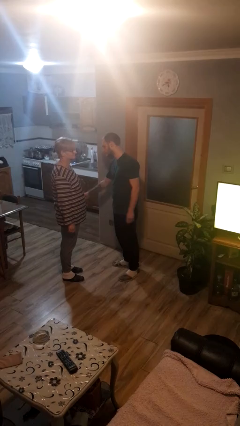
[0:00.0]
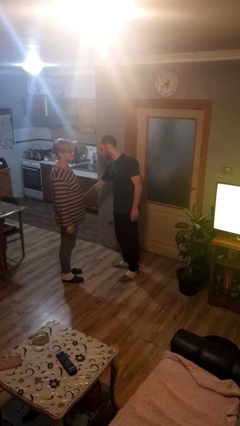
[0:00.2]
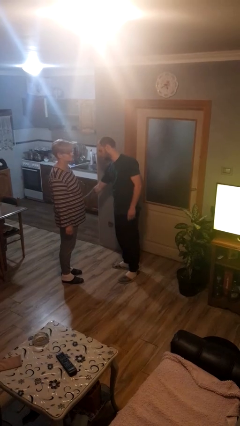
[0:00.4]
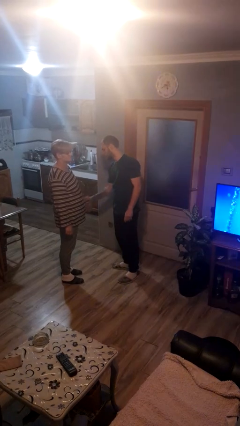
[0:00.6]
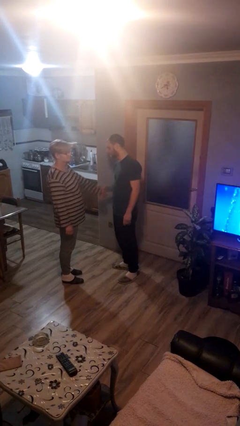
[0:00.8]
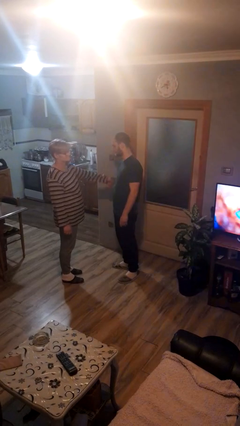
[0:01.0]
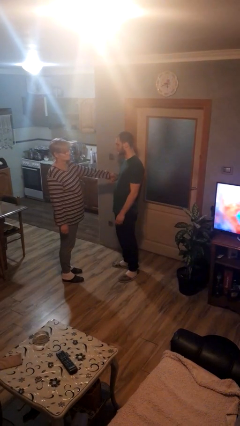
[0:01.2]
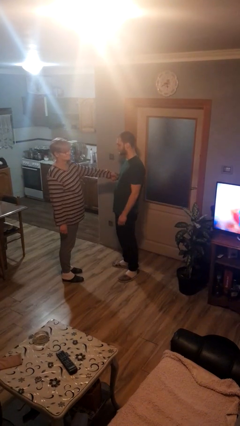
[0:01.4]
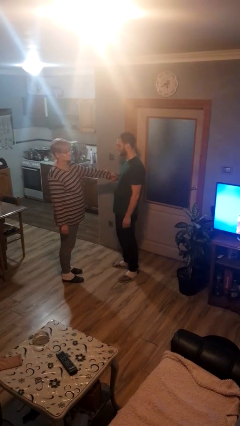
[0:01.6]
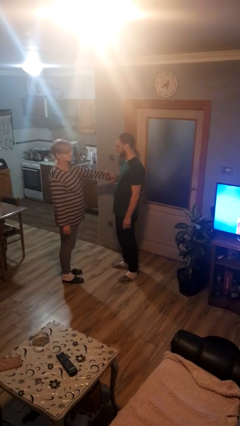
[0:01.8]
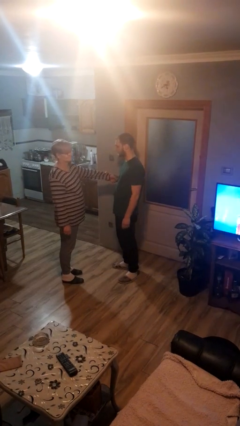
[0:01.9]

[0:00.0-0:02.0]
person grabs person by forearm

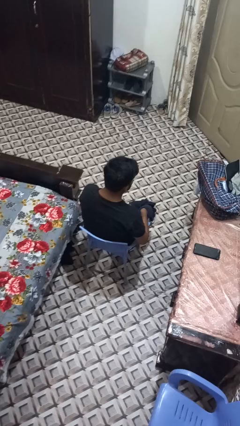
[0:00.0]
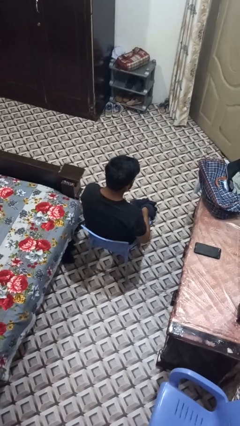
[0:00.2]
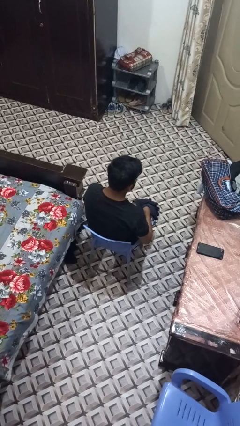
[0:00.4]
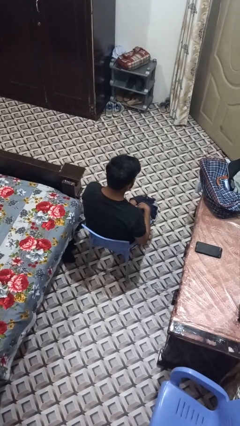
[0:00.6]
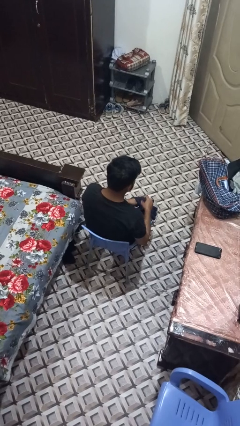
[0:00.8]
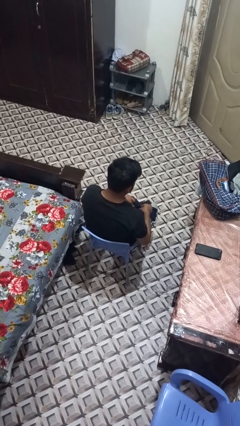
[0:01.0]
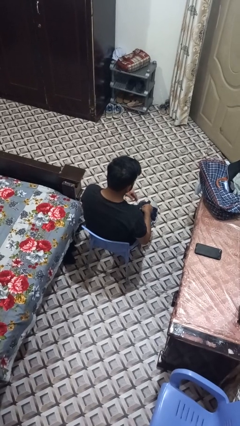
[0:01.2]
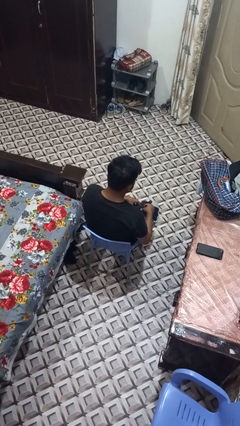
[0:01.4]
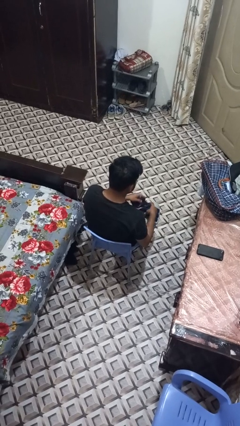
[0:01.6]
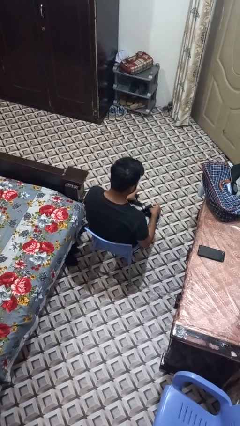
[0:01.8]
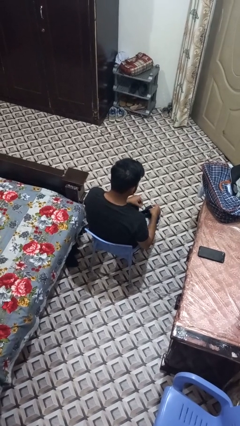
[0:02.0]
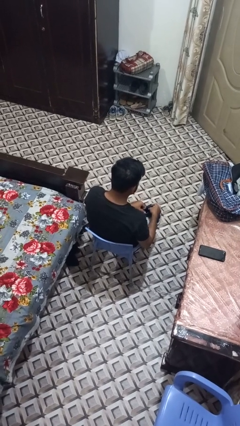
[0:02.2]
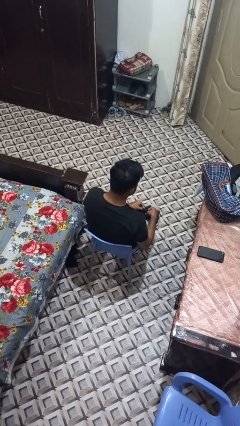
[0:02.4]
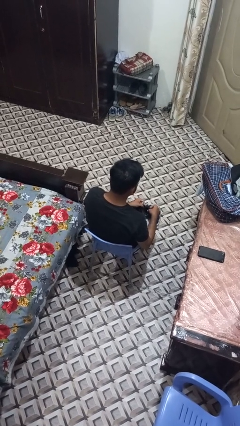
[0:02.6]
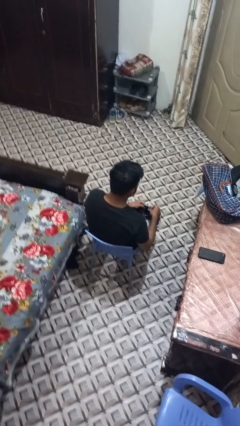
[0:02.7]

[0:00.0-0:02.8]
person takes off gloves

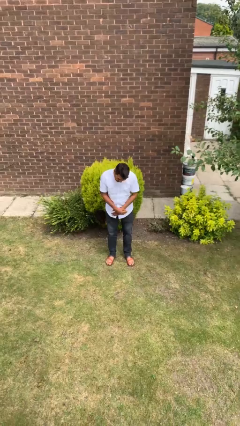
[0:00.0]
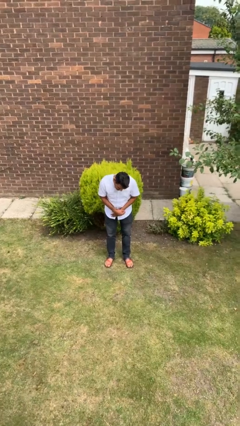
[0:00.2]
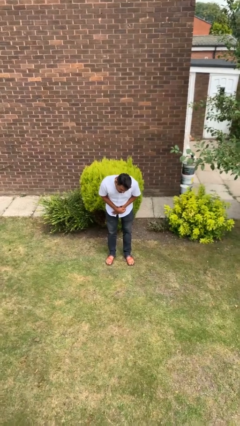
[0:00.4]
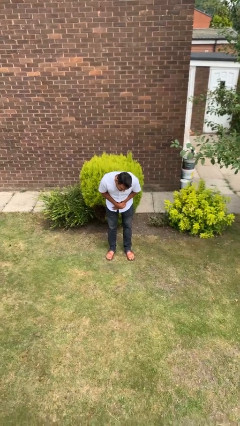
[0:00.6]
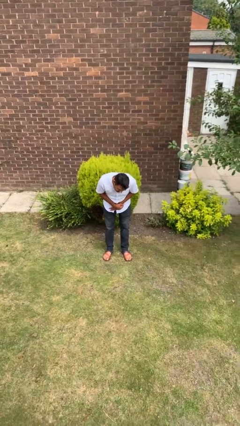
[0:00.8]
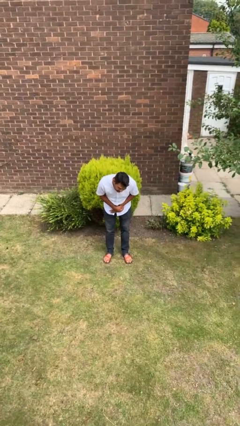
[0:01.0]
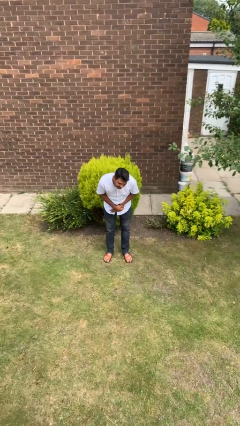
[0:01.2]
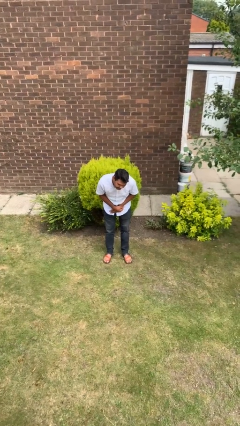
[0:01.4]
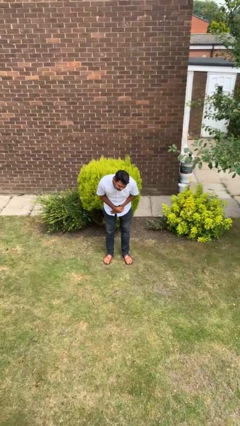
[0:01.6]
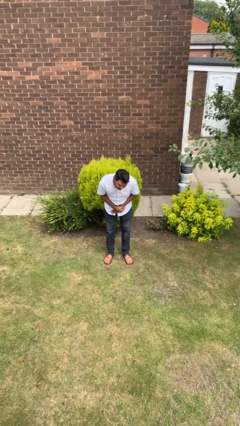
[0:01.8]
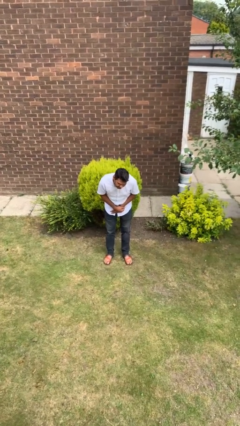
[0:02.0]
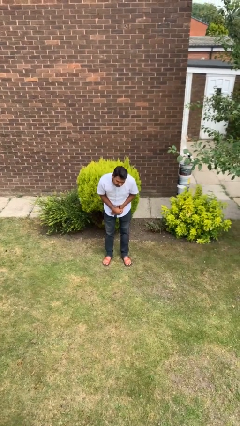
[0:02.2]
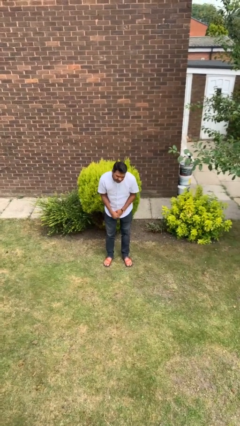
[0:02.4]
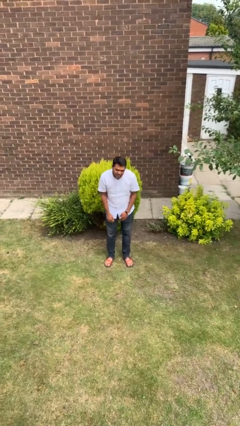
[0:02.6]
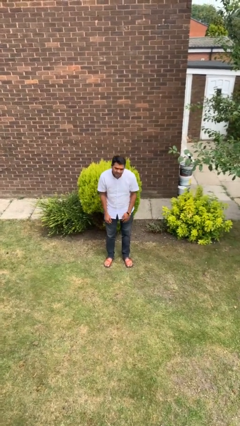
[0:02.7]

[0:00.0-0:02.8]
person bows

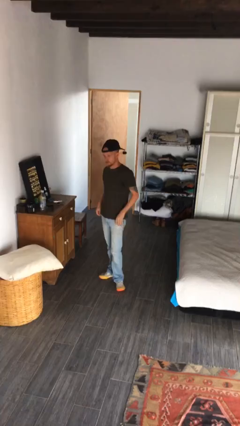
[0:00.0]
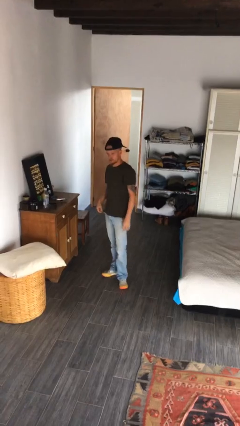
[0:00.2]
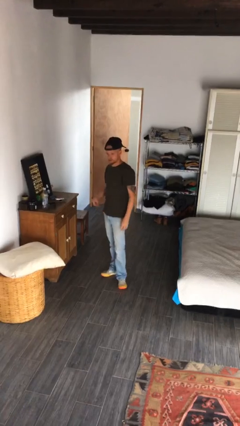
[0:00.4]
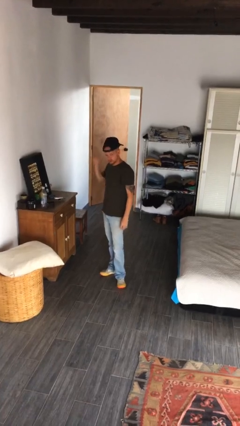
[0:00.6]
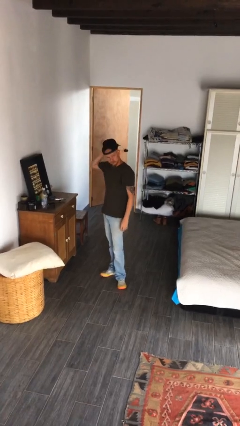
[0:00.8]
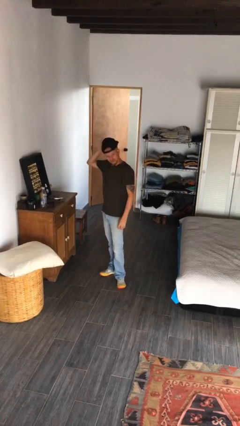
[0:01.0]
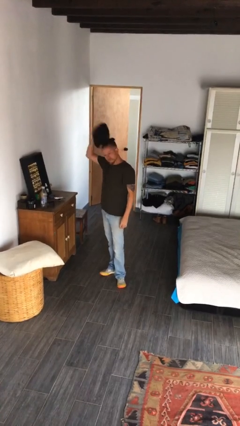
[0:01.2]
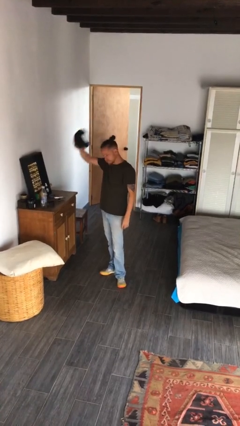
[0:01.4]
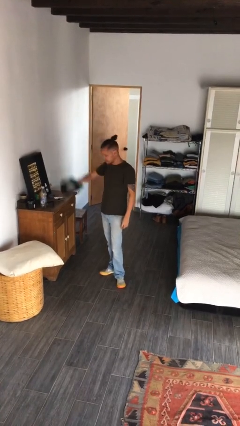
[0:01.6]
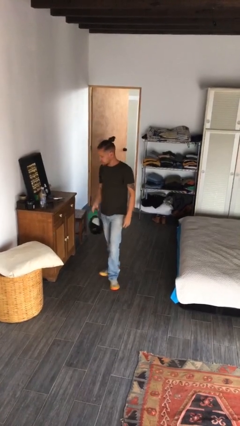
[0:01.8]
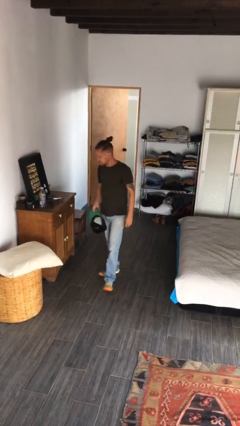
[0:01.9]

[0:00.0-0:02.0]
person takes off hat

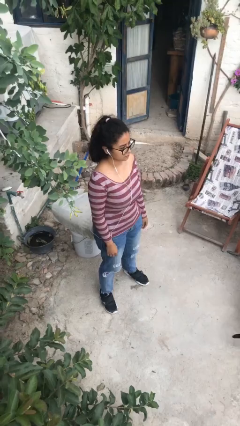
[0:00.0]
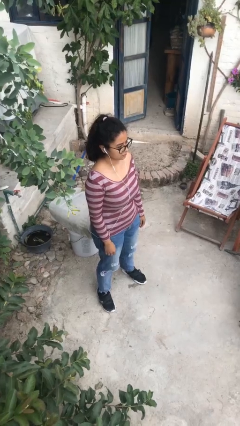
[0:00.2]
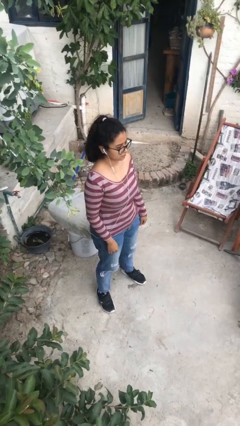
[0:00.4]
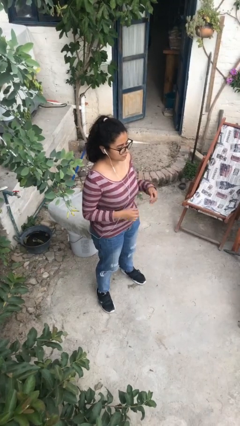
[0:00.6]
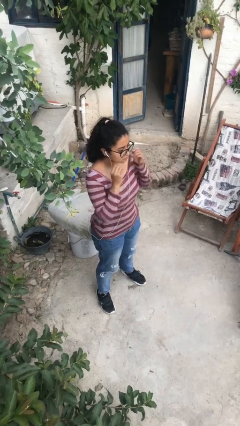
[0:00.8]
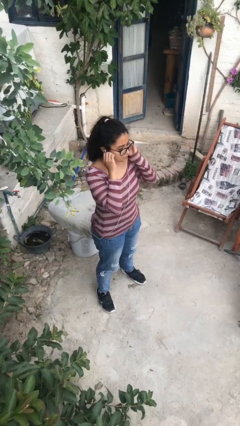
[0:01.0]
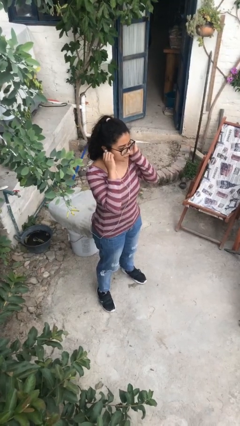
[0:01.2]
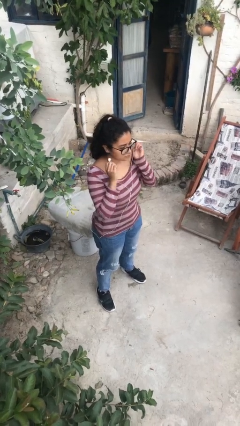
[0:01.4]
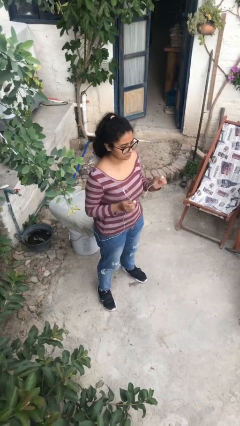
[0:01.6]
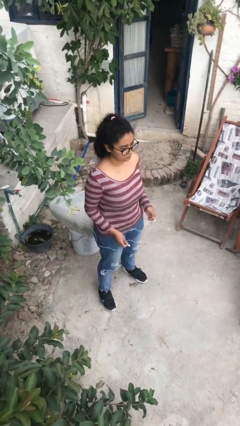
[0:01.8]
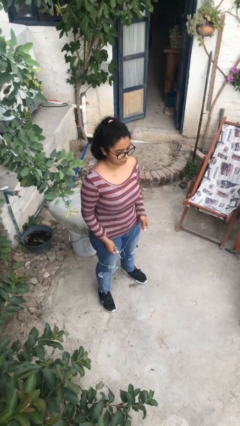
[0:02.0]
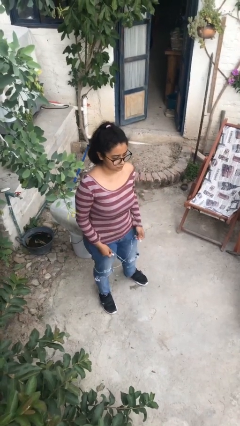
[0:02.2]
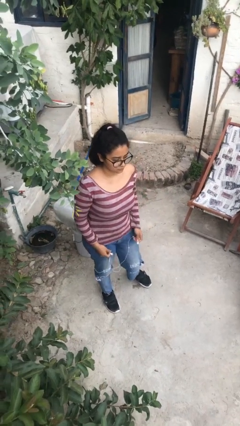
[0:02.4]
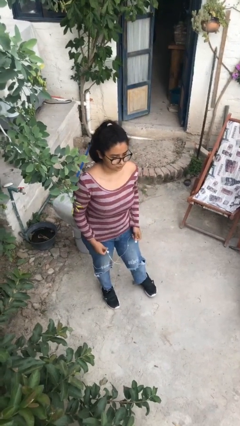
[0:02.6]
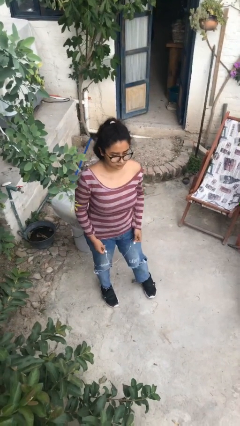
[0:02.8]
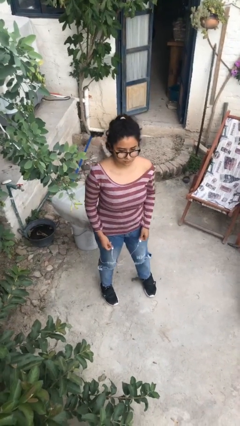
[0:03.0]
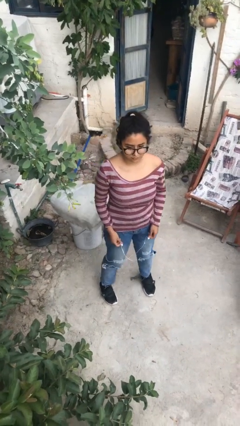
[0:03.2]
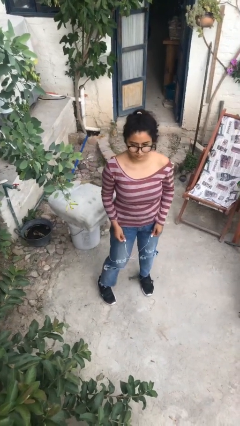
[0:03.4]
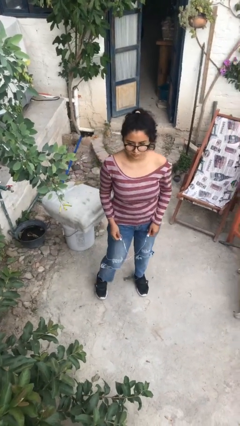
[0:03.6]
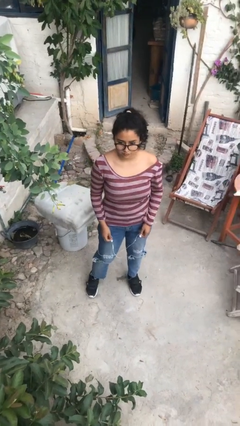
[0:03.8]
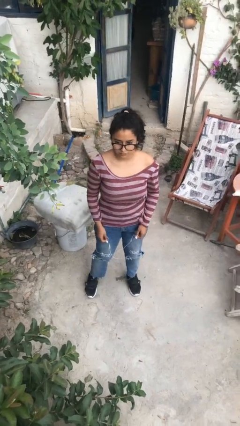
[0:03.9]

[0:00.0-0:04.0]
person takes off headphones

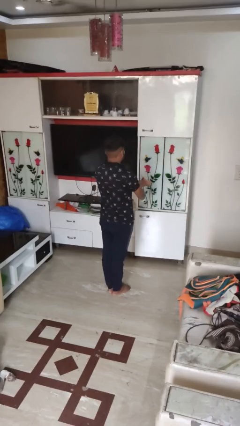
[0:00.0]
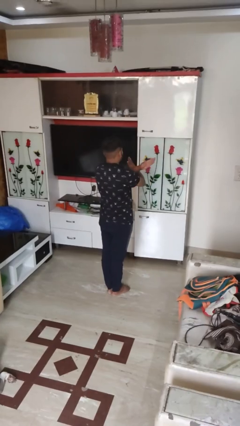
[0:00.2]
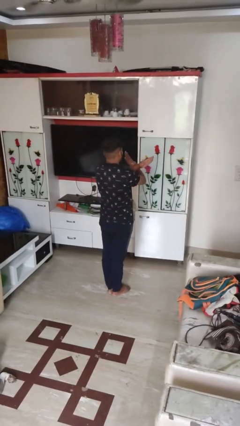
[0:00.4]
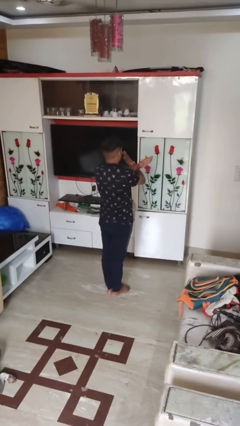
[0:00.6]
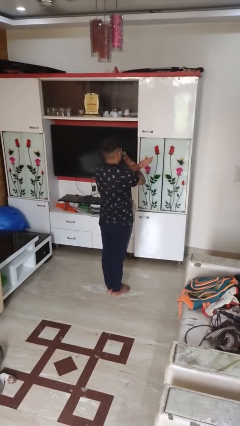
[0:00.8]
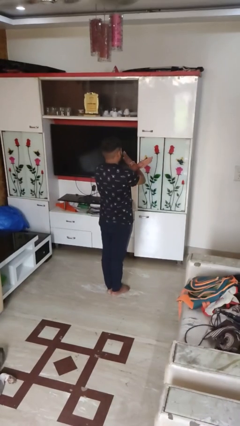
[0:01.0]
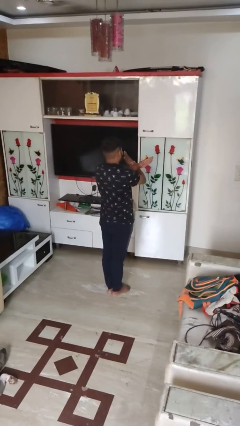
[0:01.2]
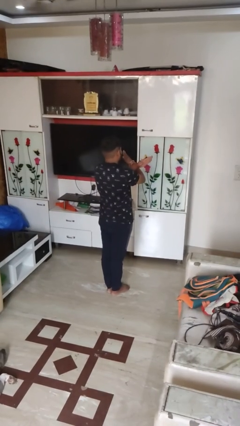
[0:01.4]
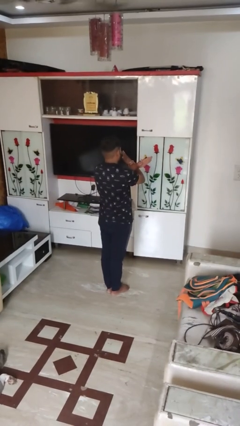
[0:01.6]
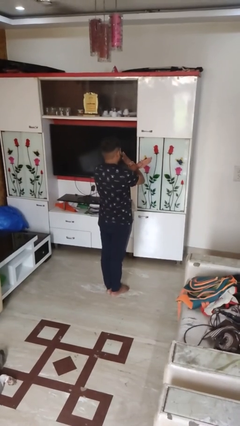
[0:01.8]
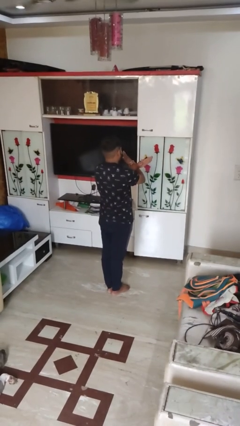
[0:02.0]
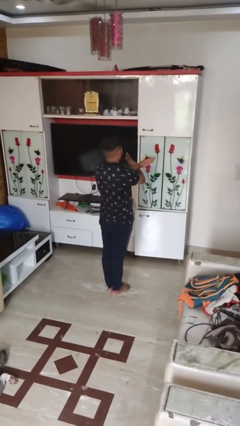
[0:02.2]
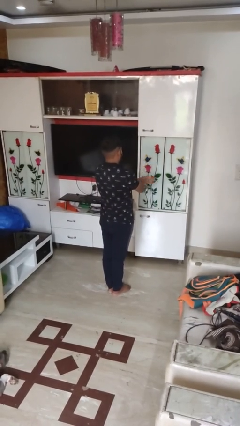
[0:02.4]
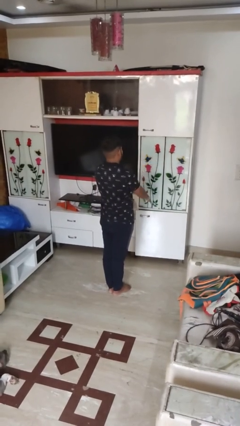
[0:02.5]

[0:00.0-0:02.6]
person gestures arms x

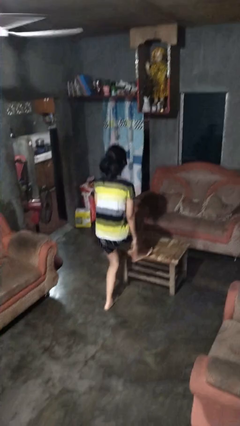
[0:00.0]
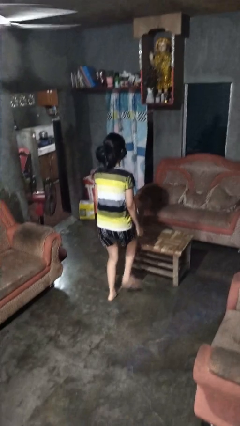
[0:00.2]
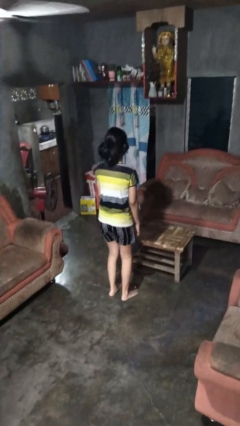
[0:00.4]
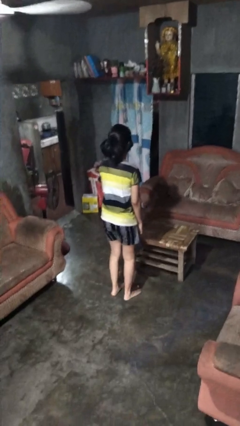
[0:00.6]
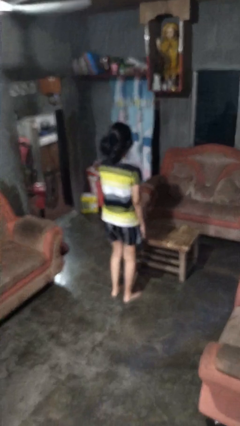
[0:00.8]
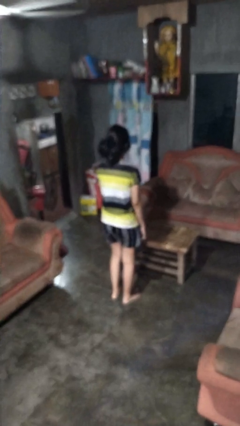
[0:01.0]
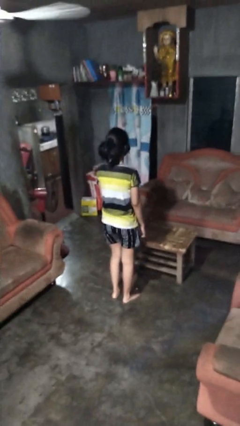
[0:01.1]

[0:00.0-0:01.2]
person climbs on table

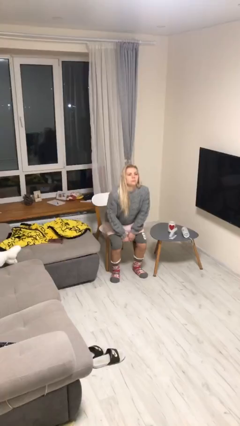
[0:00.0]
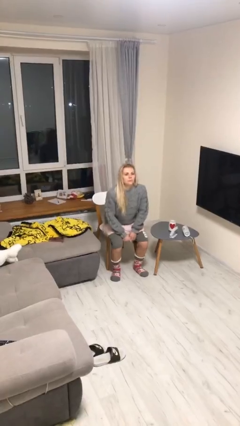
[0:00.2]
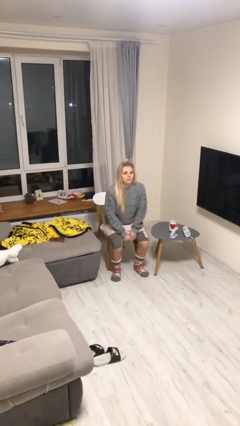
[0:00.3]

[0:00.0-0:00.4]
person sits down
